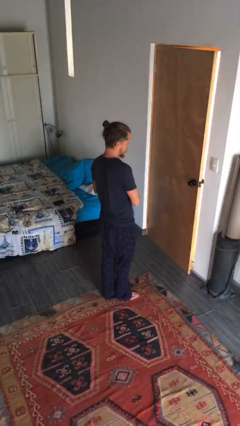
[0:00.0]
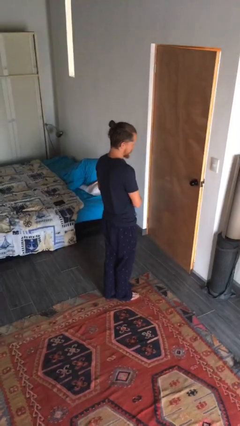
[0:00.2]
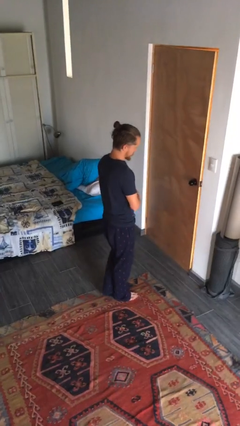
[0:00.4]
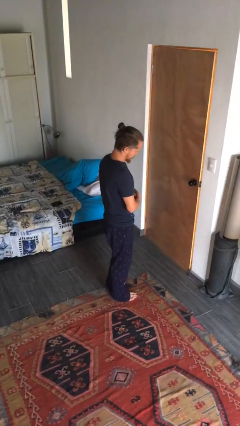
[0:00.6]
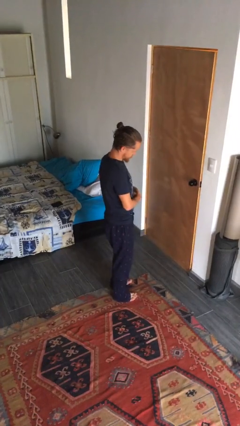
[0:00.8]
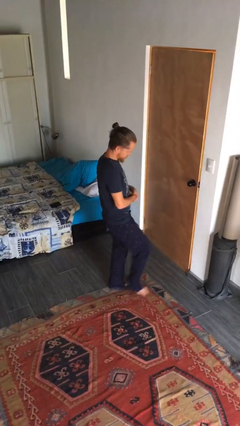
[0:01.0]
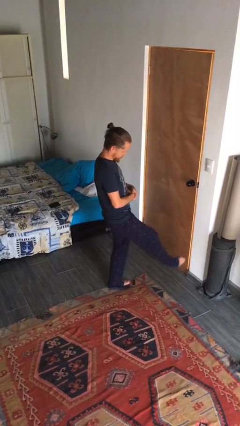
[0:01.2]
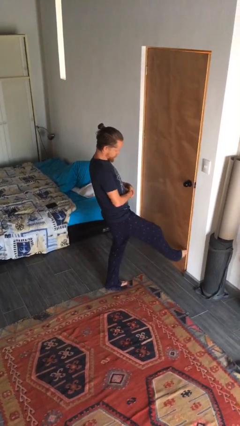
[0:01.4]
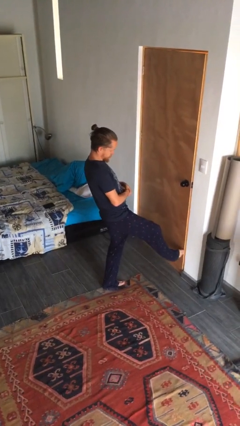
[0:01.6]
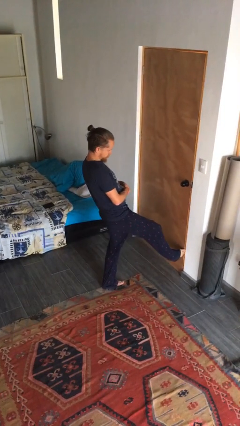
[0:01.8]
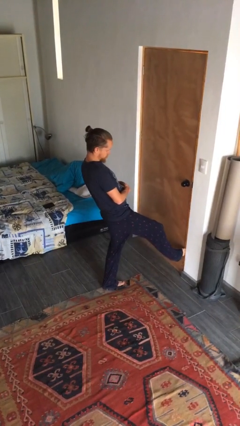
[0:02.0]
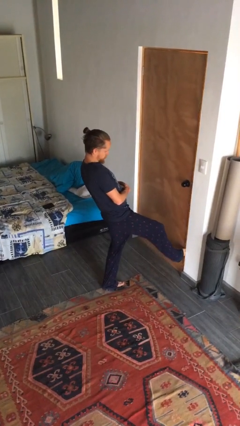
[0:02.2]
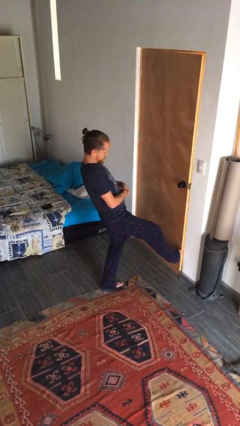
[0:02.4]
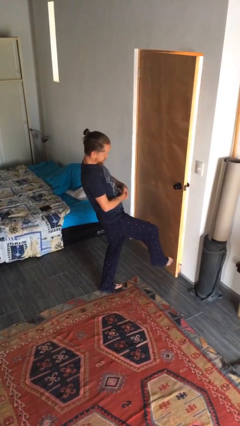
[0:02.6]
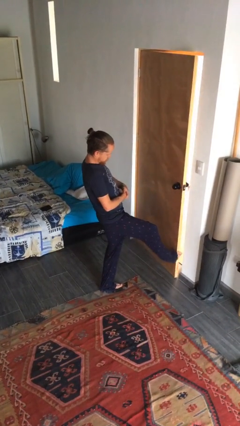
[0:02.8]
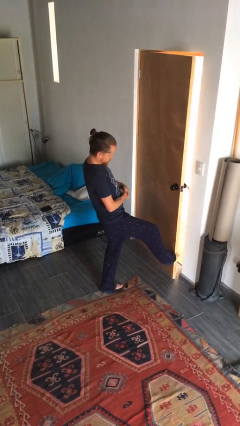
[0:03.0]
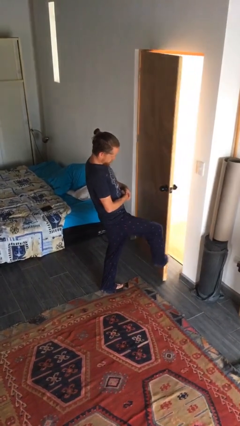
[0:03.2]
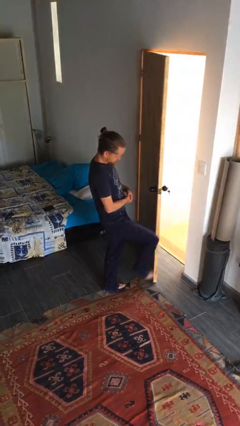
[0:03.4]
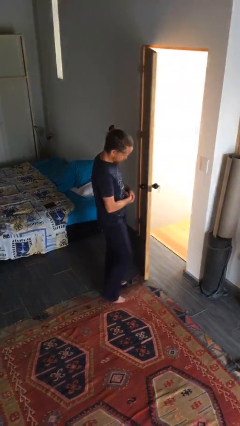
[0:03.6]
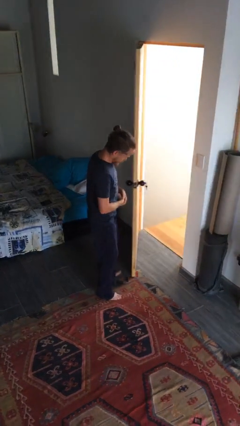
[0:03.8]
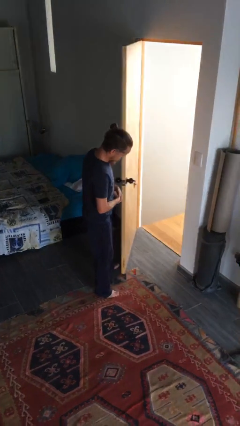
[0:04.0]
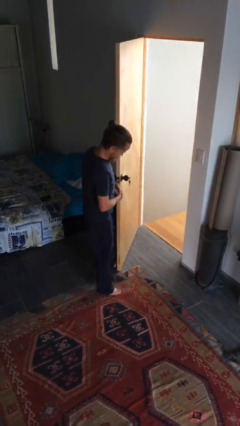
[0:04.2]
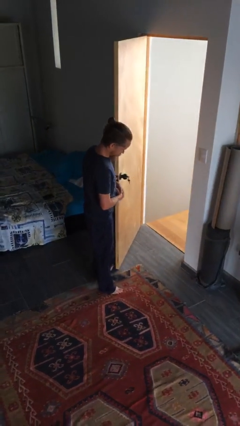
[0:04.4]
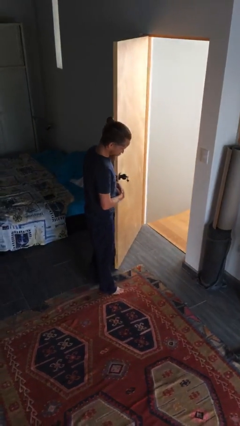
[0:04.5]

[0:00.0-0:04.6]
person opens facility door

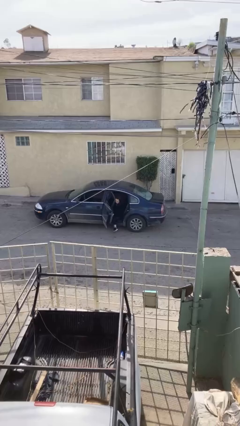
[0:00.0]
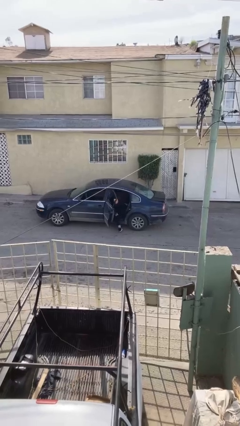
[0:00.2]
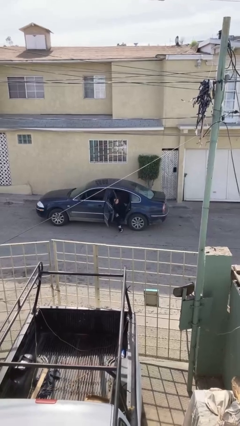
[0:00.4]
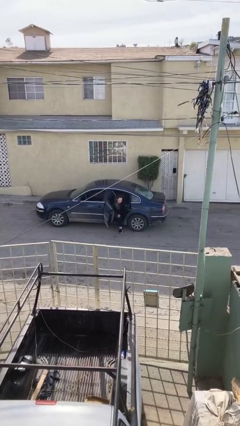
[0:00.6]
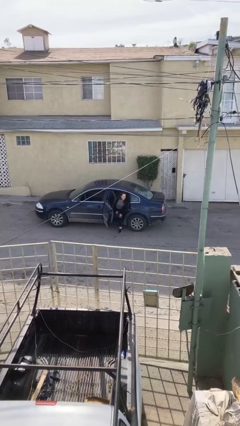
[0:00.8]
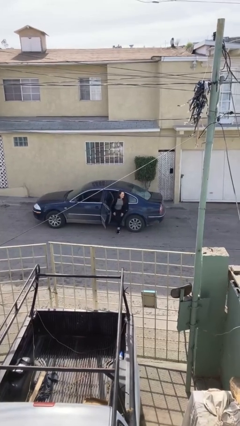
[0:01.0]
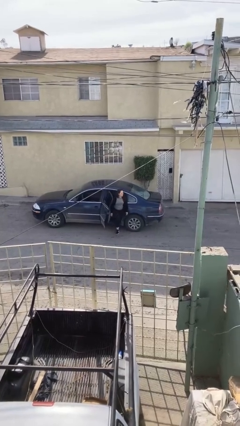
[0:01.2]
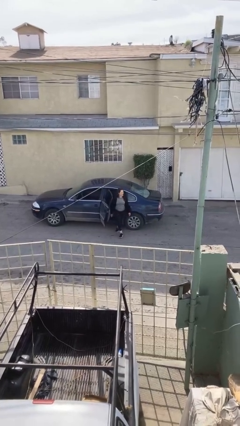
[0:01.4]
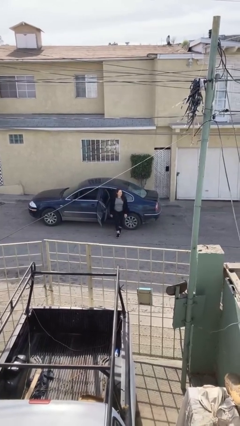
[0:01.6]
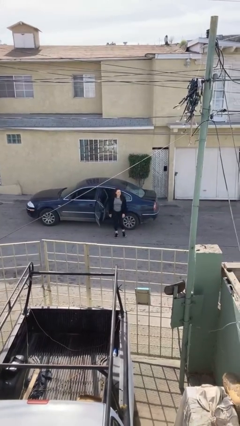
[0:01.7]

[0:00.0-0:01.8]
person exits car

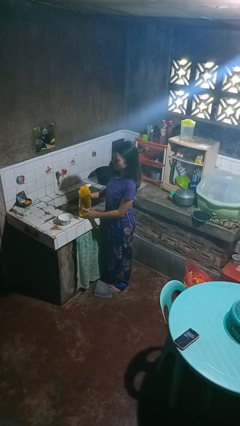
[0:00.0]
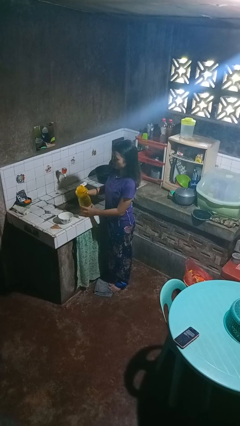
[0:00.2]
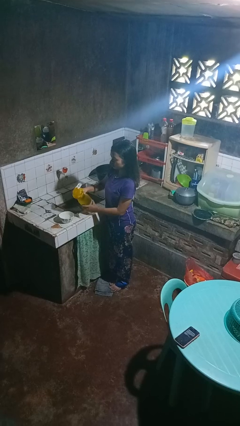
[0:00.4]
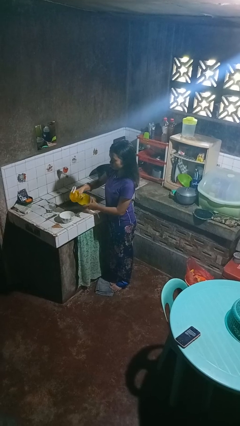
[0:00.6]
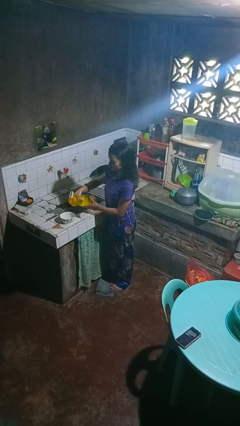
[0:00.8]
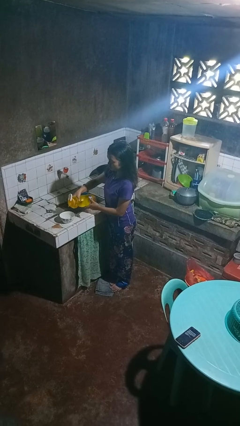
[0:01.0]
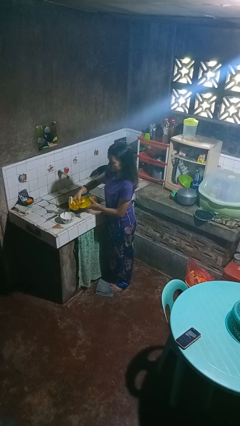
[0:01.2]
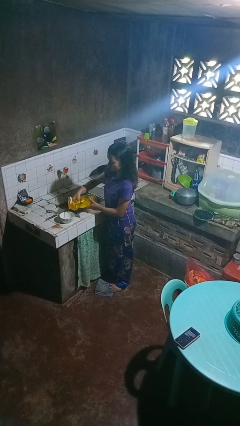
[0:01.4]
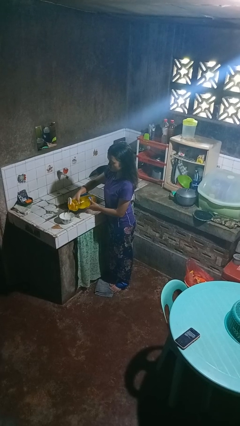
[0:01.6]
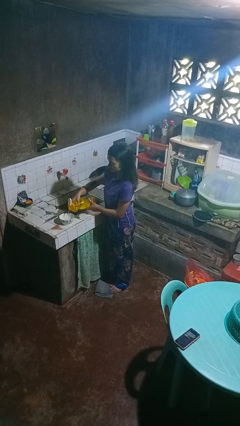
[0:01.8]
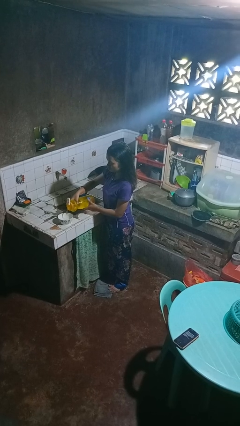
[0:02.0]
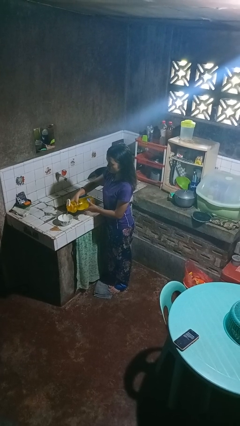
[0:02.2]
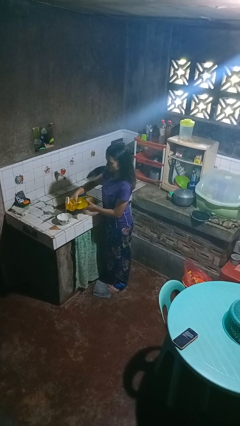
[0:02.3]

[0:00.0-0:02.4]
person pours into bowl

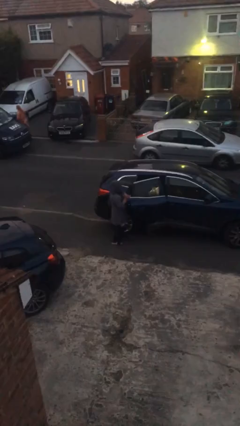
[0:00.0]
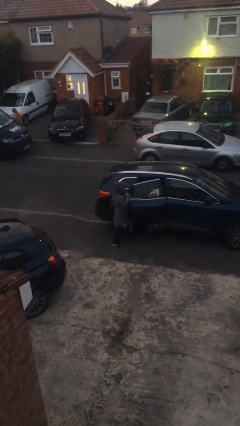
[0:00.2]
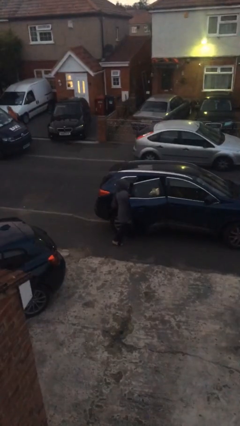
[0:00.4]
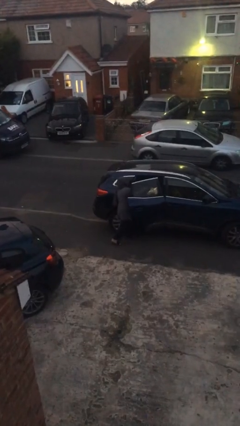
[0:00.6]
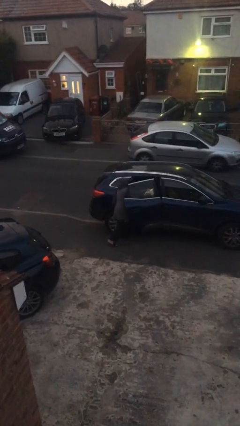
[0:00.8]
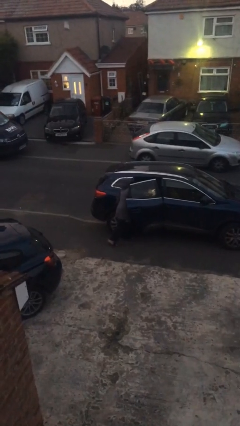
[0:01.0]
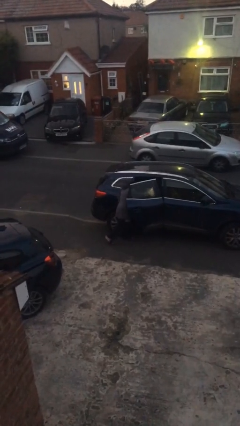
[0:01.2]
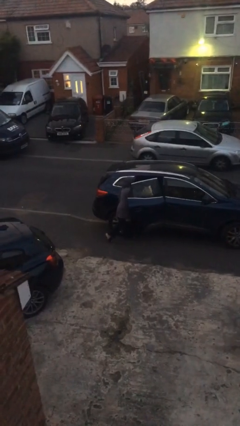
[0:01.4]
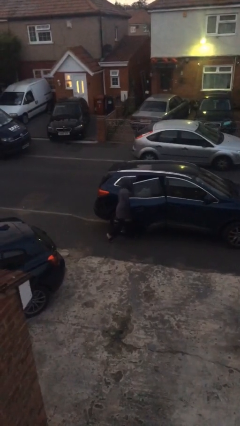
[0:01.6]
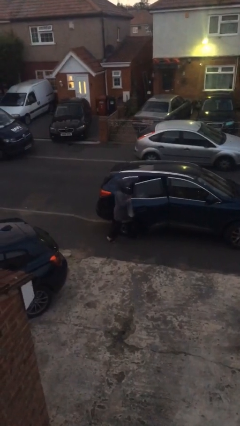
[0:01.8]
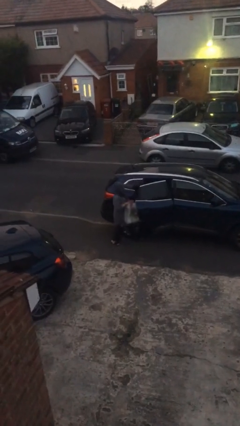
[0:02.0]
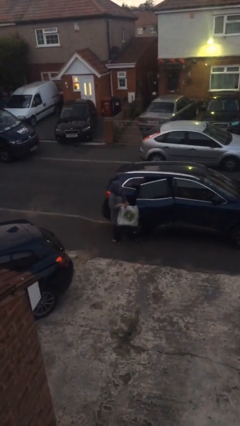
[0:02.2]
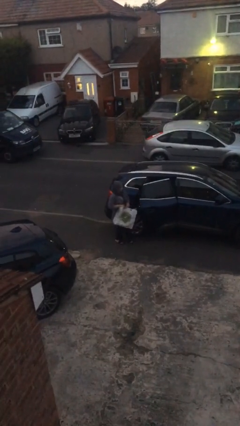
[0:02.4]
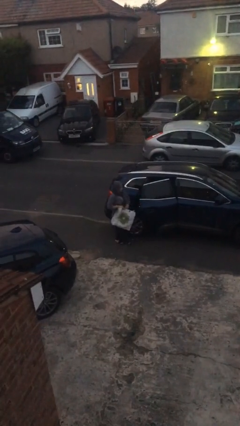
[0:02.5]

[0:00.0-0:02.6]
person unloads car

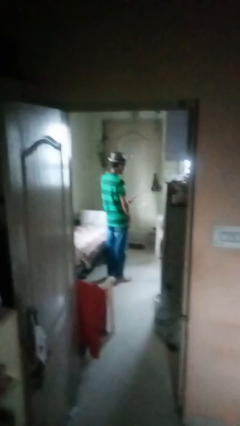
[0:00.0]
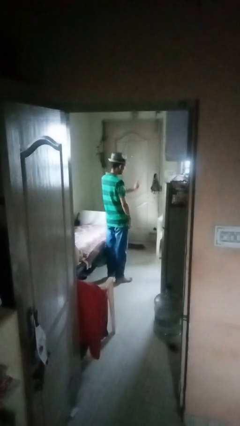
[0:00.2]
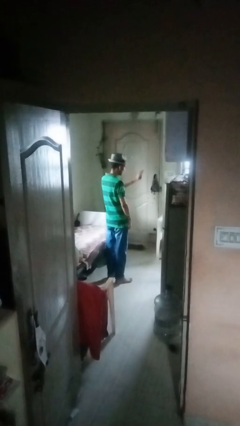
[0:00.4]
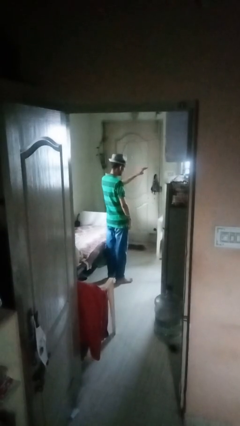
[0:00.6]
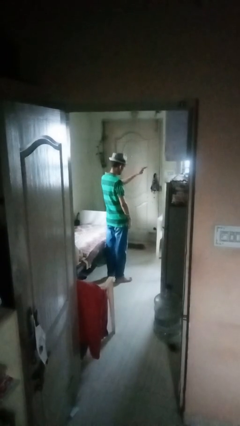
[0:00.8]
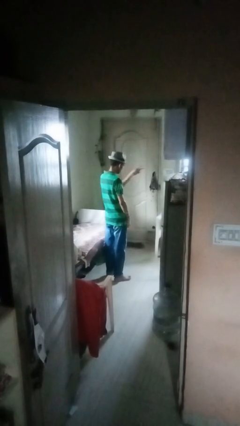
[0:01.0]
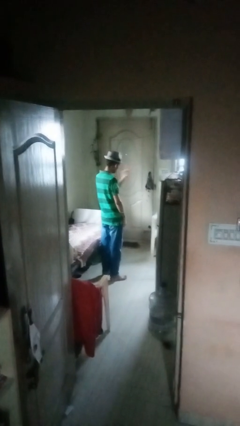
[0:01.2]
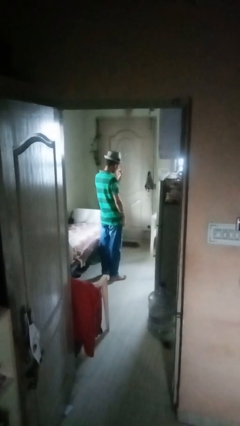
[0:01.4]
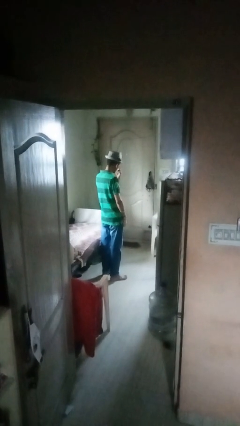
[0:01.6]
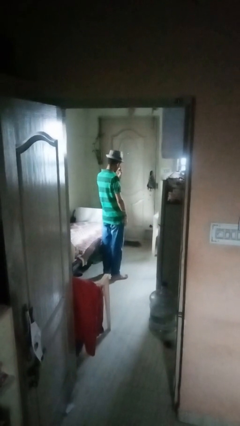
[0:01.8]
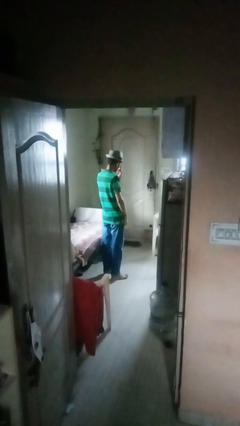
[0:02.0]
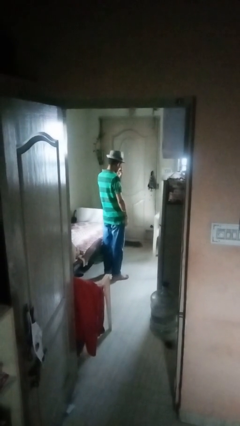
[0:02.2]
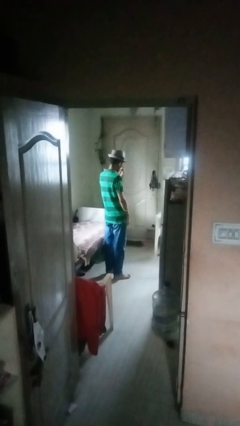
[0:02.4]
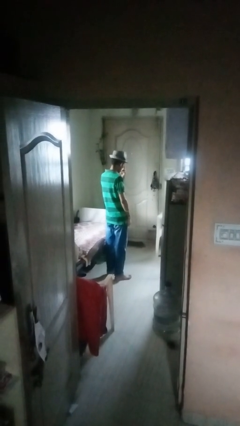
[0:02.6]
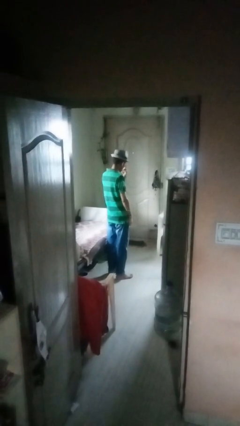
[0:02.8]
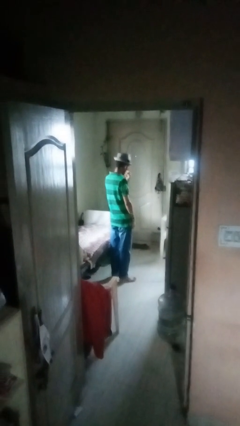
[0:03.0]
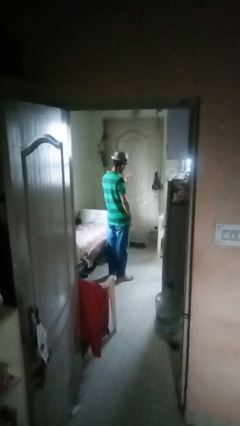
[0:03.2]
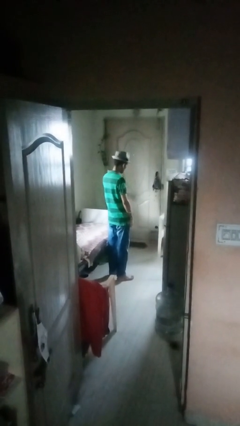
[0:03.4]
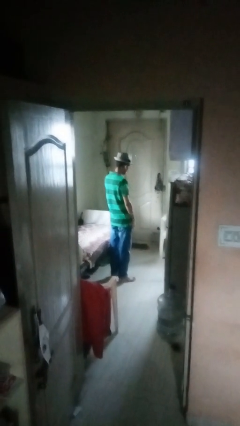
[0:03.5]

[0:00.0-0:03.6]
person gestures watch closely

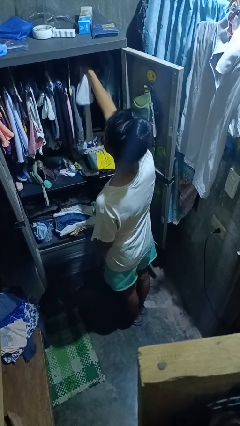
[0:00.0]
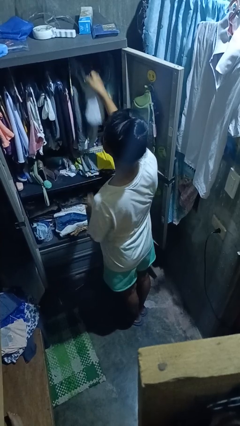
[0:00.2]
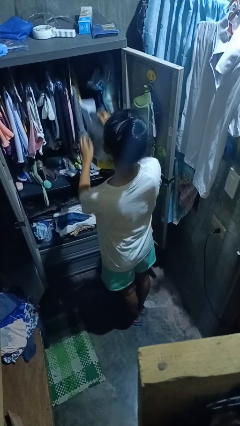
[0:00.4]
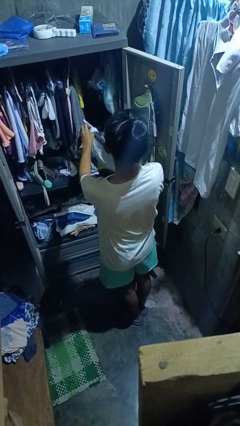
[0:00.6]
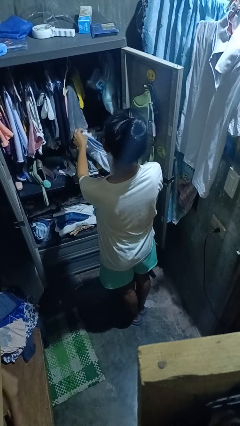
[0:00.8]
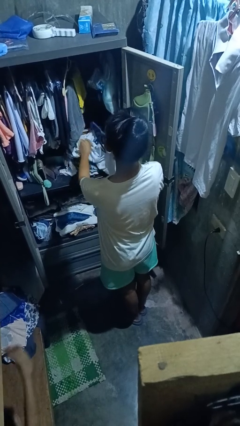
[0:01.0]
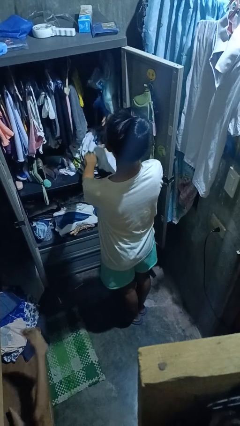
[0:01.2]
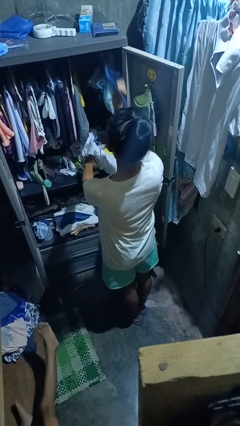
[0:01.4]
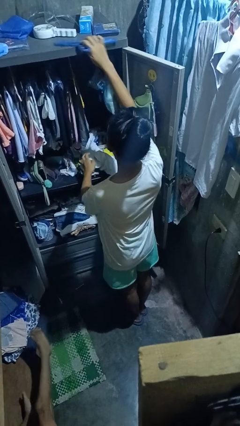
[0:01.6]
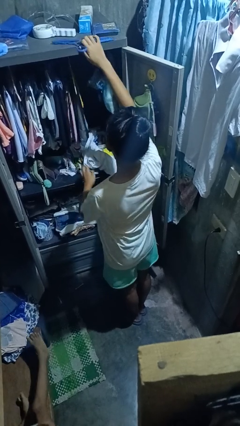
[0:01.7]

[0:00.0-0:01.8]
person takes clothes from closet

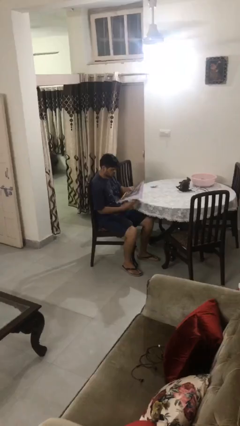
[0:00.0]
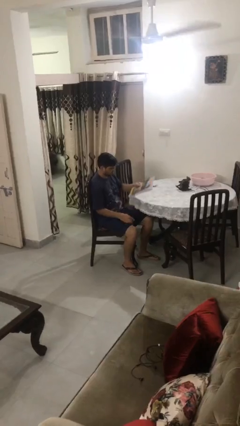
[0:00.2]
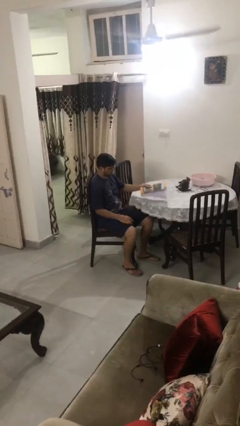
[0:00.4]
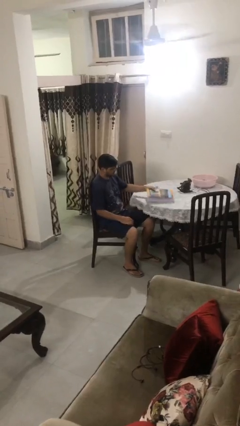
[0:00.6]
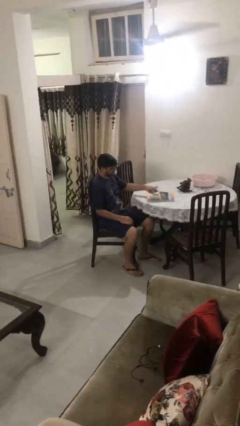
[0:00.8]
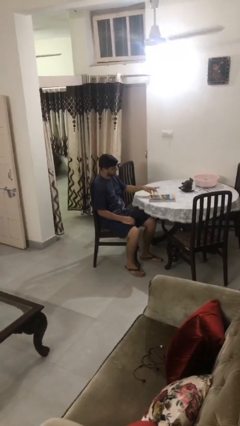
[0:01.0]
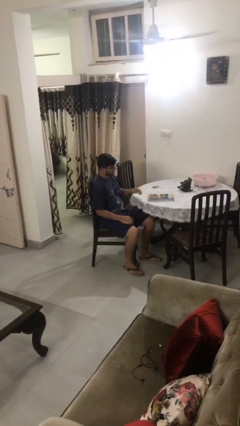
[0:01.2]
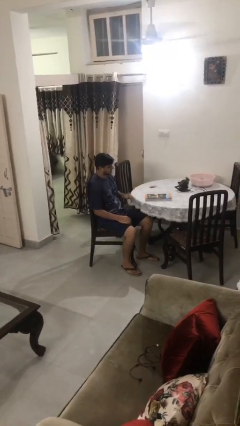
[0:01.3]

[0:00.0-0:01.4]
person puts down object on table
